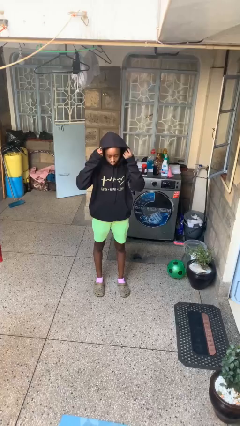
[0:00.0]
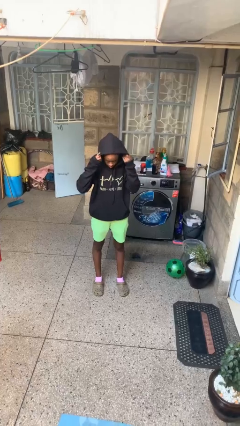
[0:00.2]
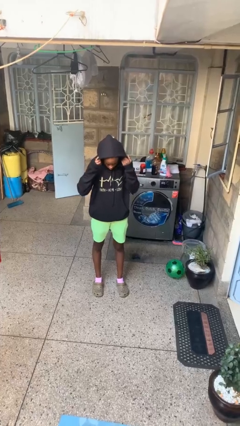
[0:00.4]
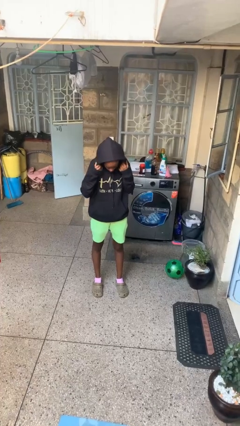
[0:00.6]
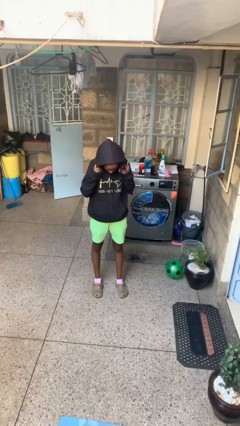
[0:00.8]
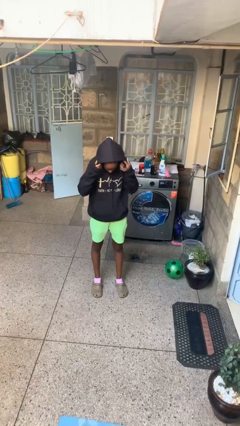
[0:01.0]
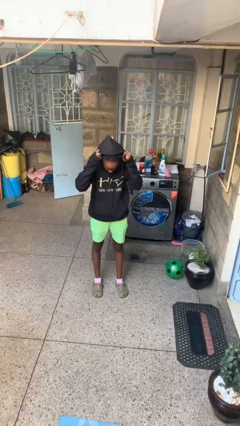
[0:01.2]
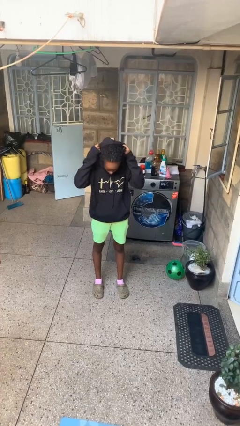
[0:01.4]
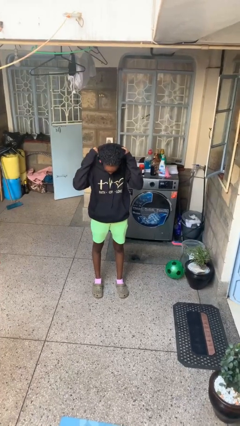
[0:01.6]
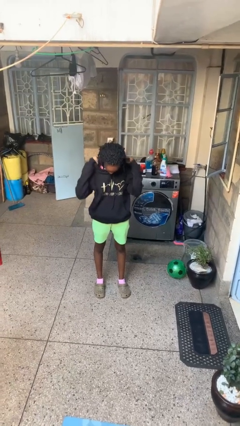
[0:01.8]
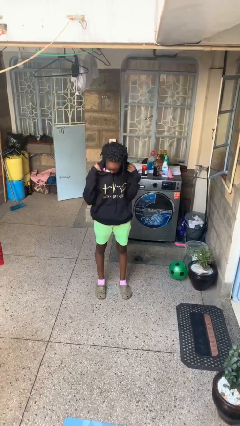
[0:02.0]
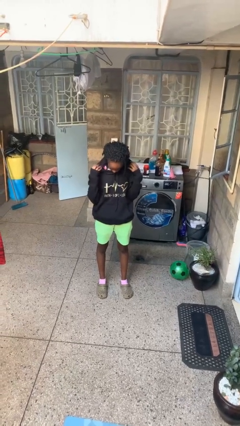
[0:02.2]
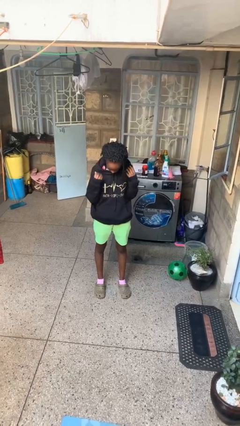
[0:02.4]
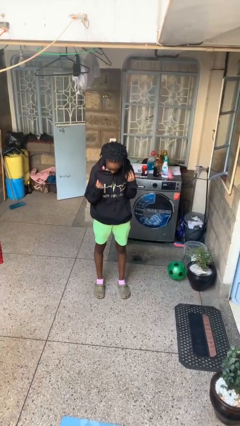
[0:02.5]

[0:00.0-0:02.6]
person takes off hoodie

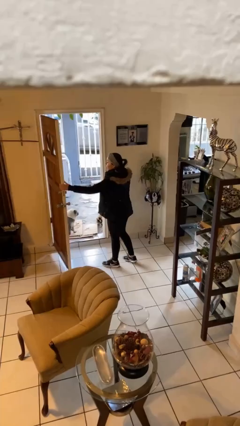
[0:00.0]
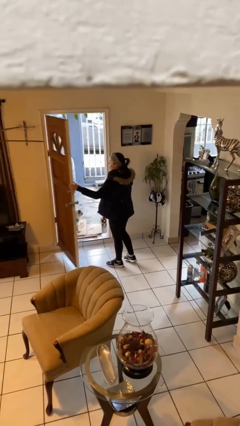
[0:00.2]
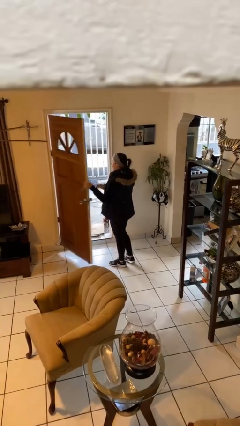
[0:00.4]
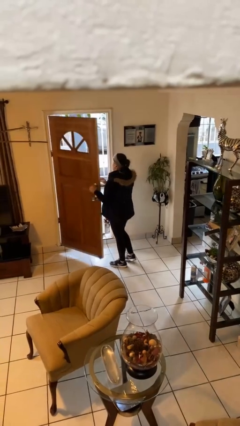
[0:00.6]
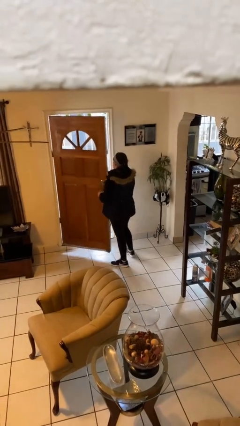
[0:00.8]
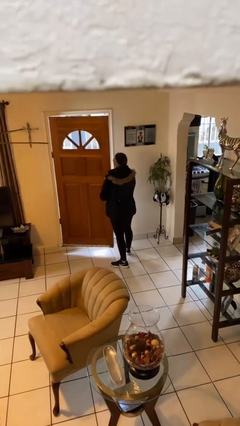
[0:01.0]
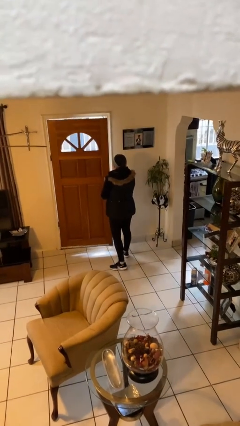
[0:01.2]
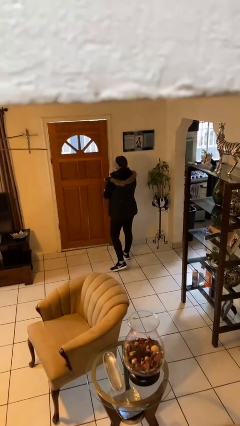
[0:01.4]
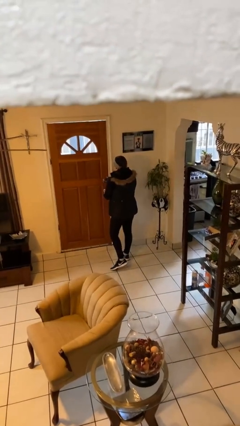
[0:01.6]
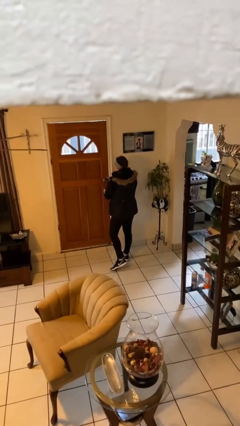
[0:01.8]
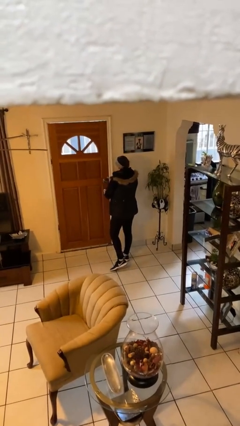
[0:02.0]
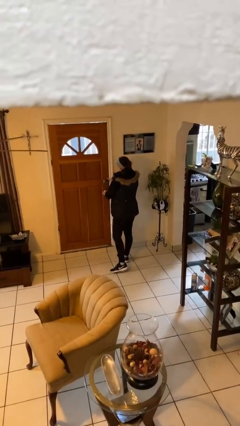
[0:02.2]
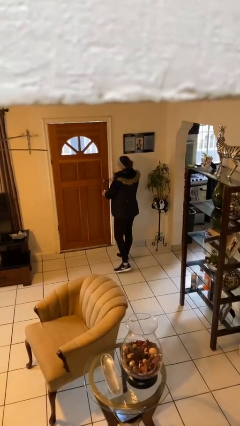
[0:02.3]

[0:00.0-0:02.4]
person closes facility door

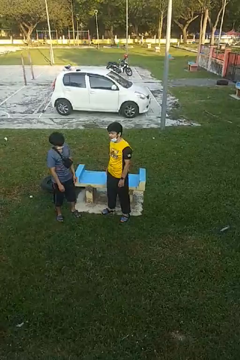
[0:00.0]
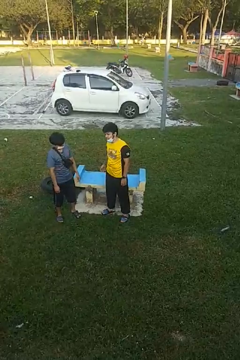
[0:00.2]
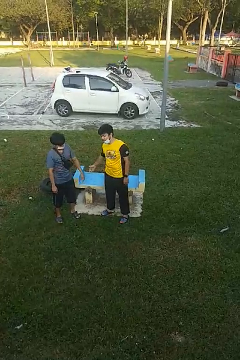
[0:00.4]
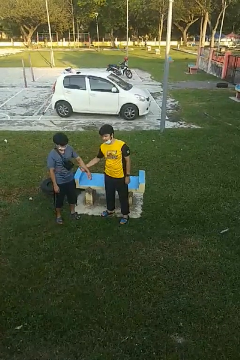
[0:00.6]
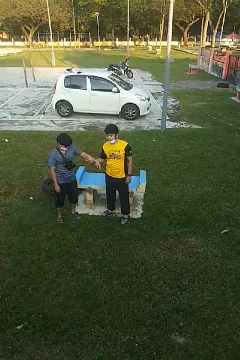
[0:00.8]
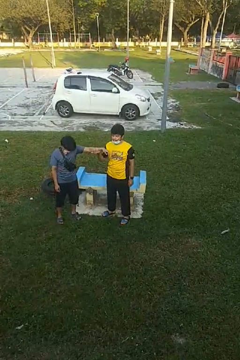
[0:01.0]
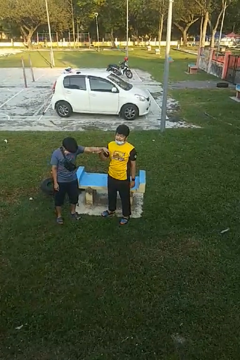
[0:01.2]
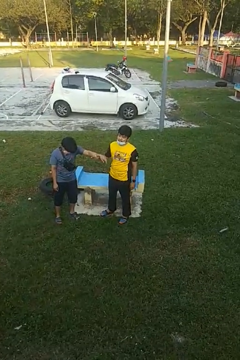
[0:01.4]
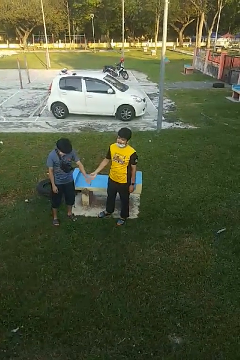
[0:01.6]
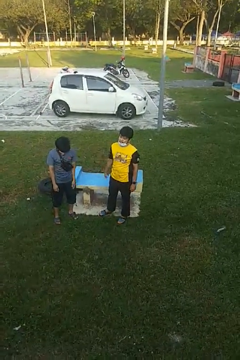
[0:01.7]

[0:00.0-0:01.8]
person grabs person by forearm

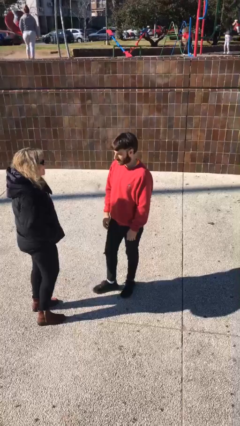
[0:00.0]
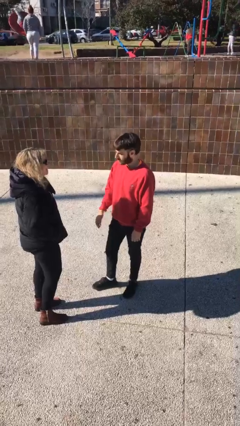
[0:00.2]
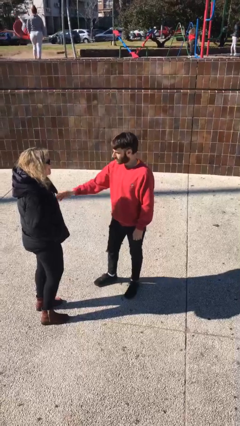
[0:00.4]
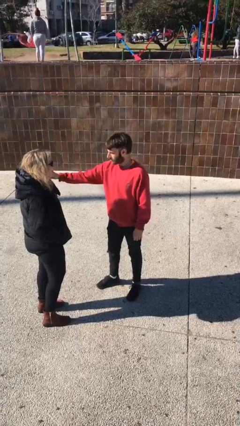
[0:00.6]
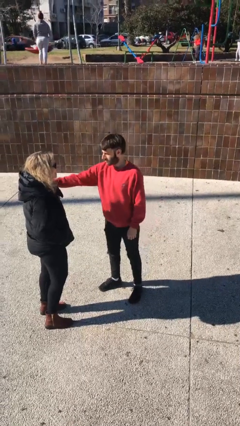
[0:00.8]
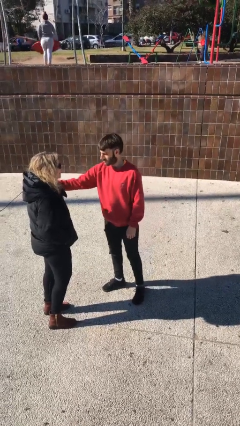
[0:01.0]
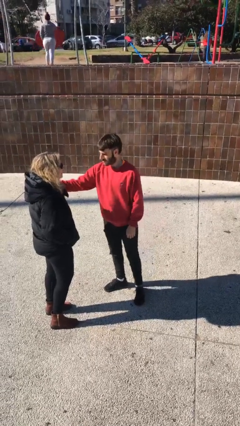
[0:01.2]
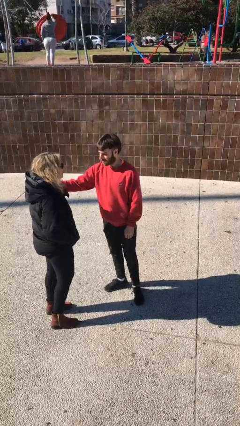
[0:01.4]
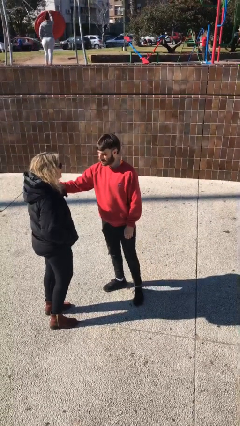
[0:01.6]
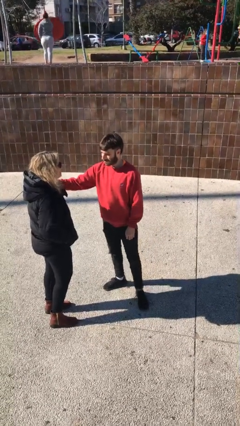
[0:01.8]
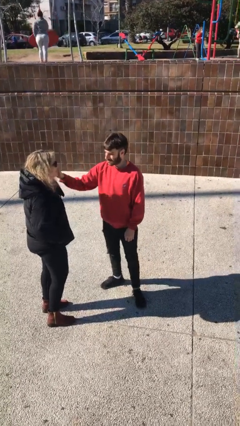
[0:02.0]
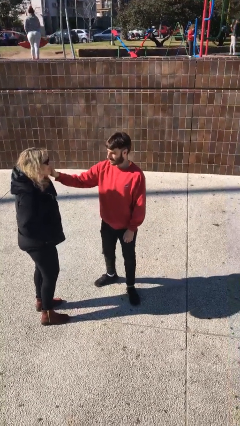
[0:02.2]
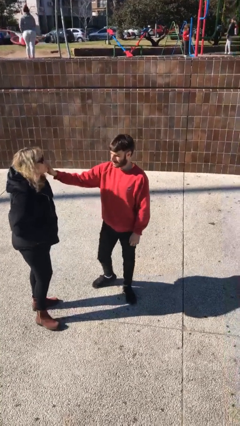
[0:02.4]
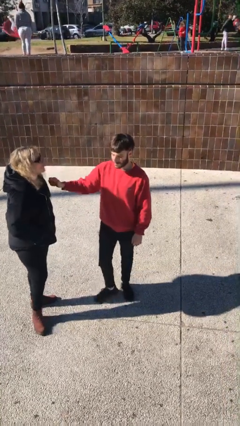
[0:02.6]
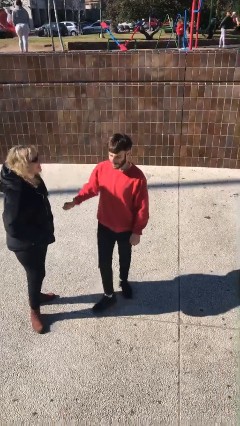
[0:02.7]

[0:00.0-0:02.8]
person pounds shoulders of person

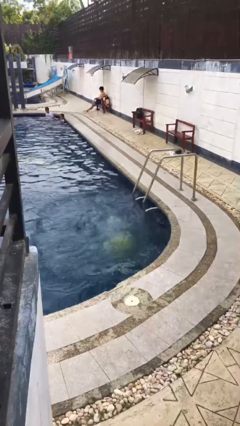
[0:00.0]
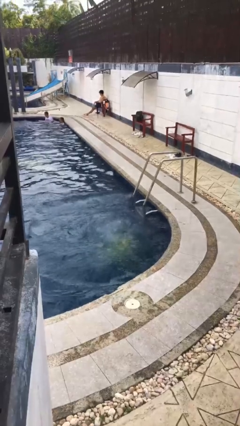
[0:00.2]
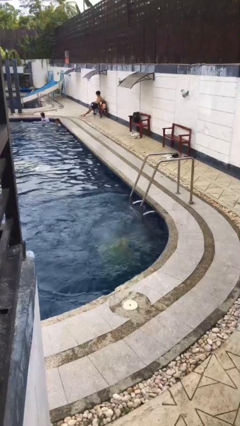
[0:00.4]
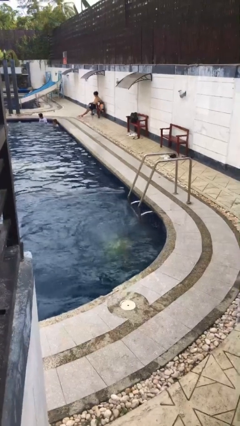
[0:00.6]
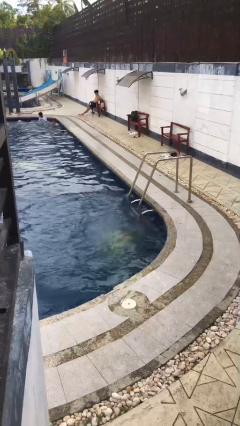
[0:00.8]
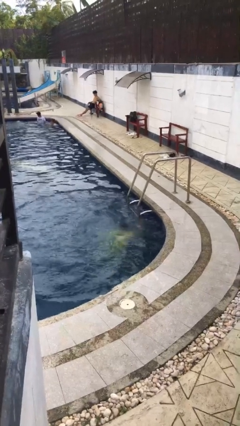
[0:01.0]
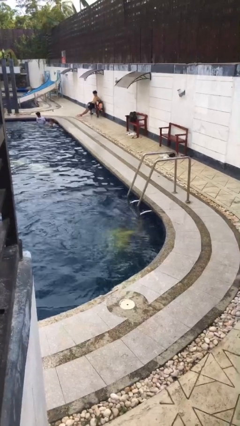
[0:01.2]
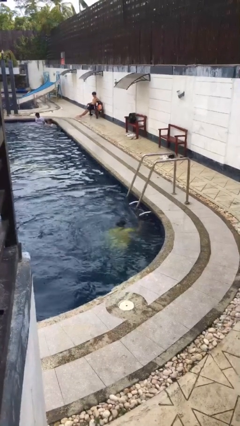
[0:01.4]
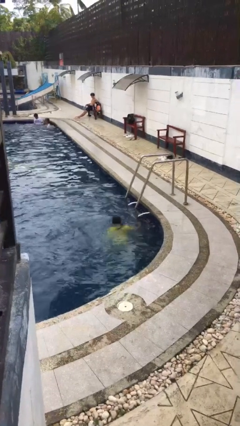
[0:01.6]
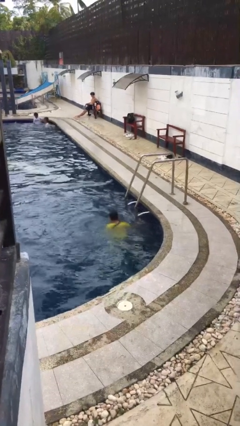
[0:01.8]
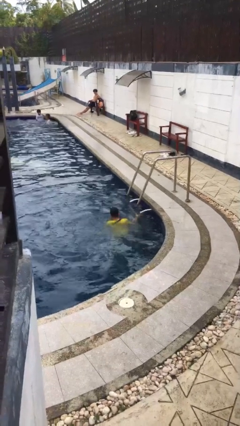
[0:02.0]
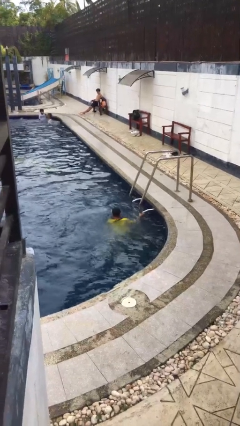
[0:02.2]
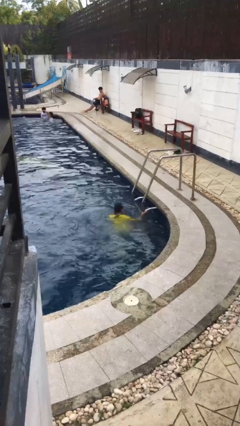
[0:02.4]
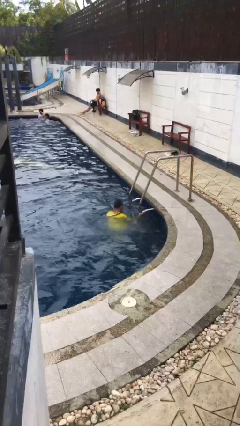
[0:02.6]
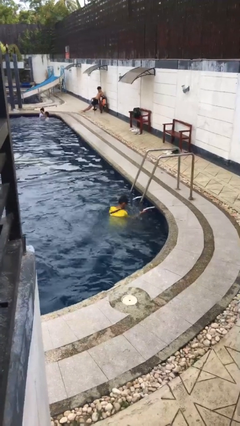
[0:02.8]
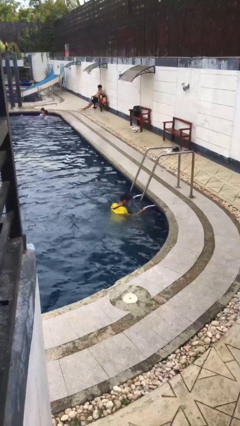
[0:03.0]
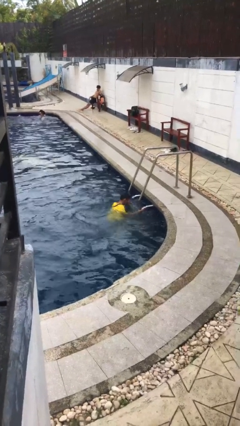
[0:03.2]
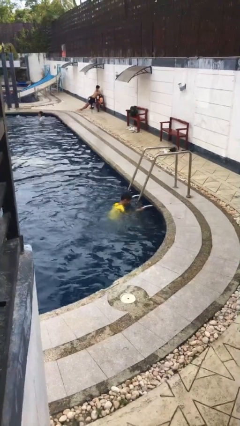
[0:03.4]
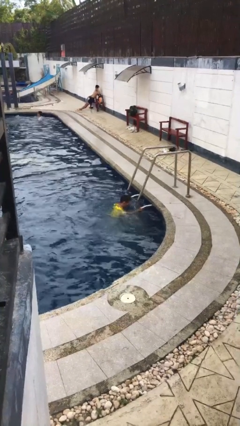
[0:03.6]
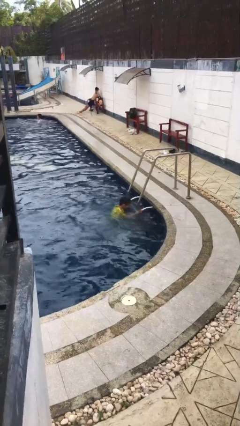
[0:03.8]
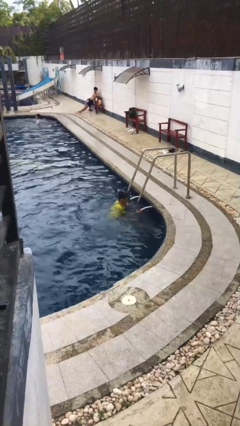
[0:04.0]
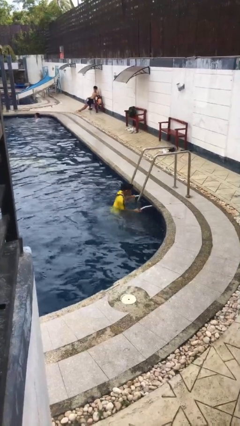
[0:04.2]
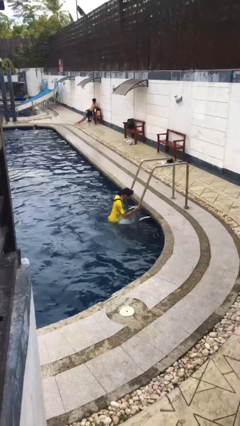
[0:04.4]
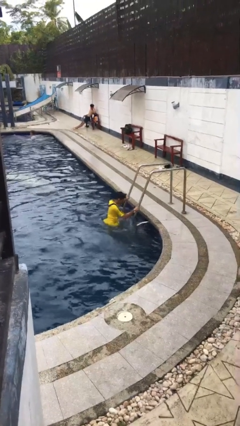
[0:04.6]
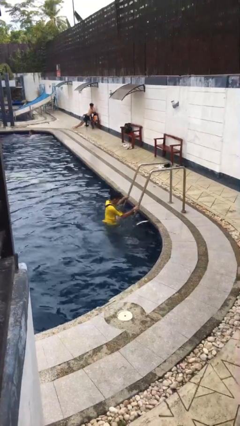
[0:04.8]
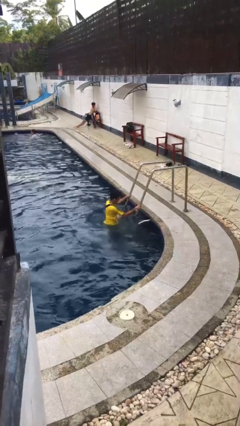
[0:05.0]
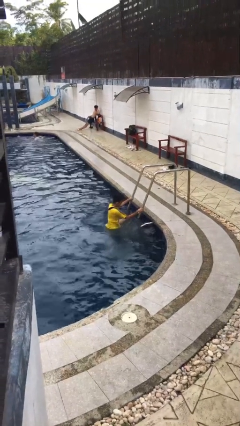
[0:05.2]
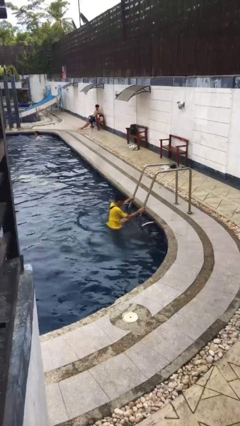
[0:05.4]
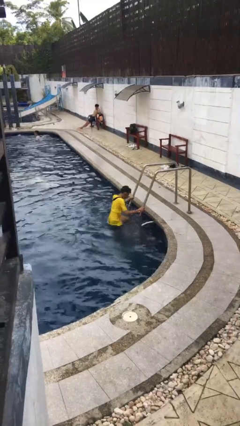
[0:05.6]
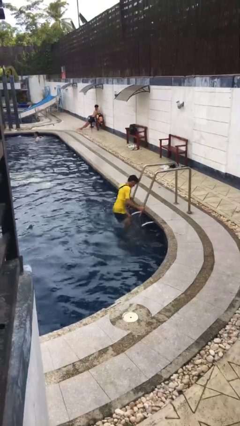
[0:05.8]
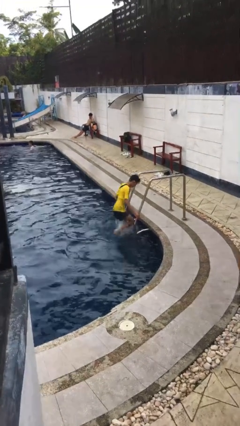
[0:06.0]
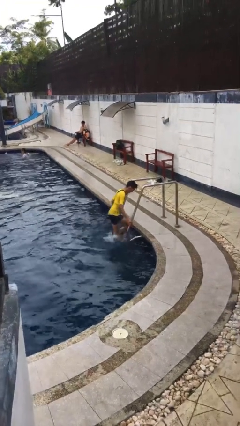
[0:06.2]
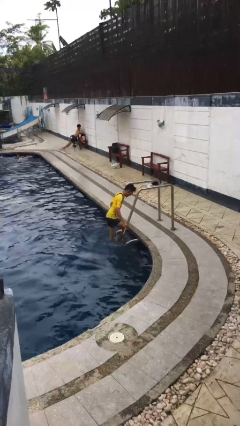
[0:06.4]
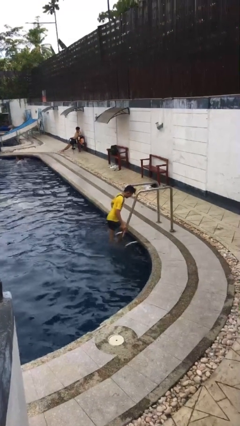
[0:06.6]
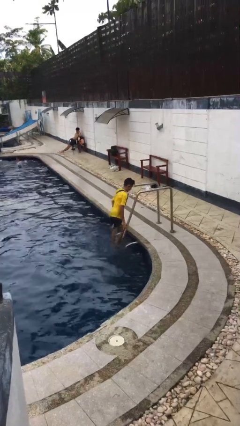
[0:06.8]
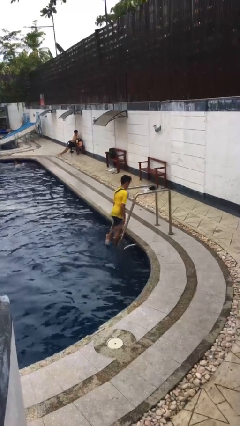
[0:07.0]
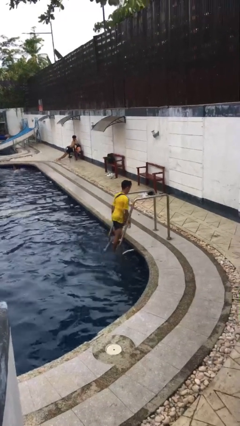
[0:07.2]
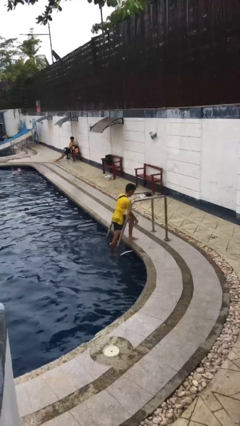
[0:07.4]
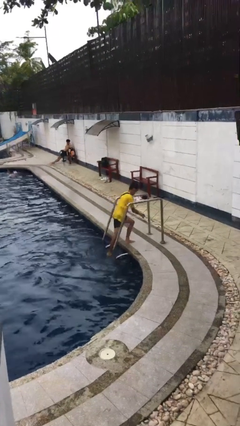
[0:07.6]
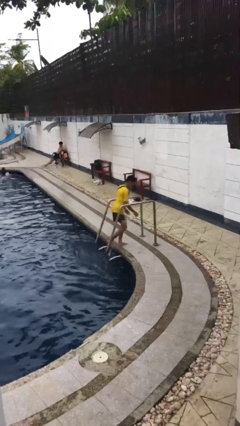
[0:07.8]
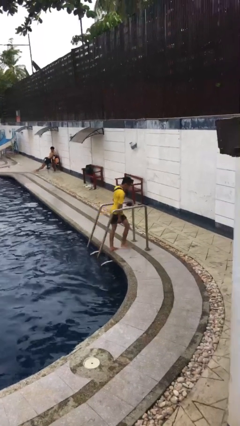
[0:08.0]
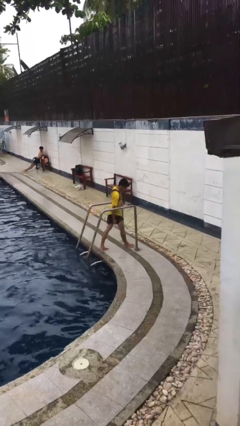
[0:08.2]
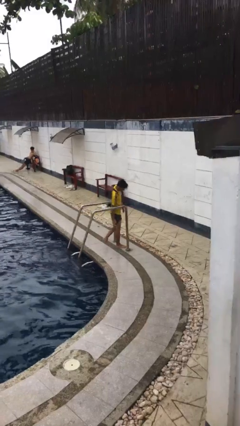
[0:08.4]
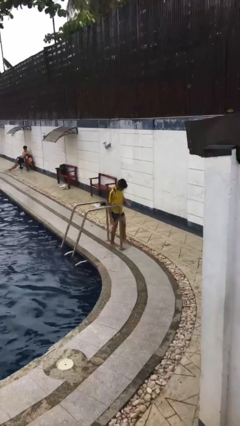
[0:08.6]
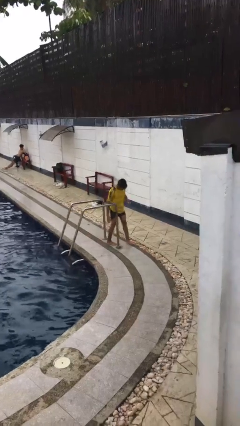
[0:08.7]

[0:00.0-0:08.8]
person exits pool
